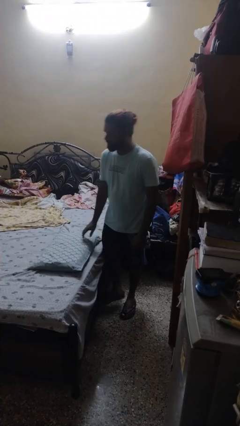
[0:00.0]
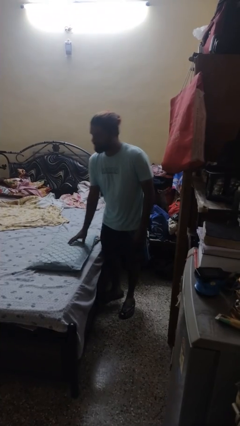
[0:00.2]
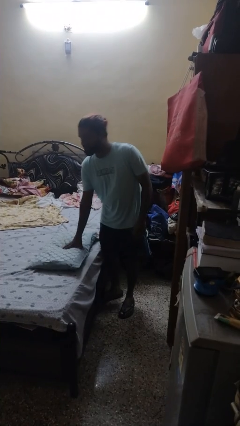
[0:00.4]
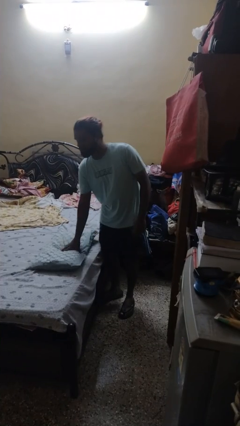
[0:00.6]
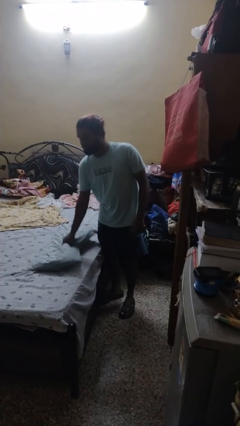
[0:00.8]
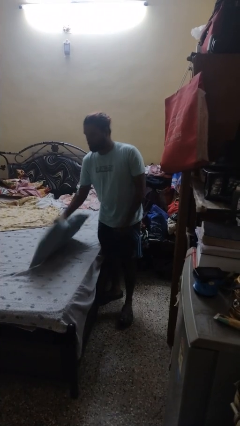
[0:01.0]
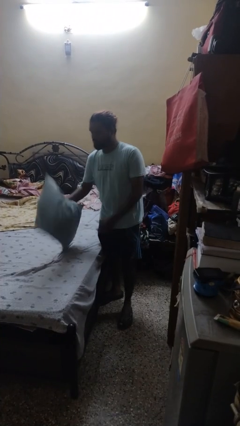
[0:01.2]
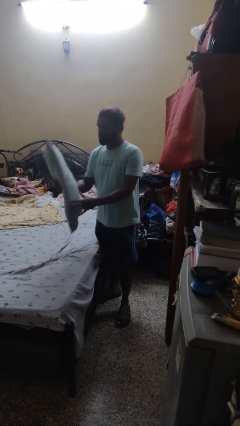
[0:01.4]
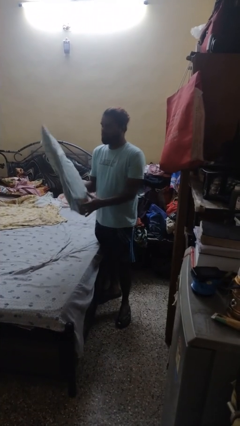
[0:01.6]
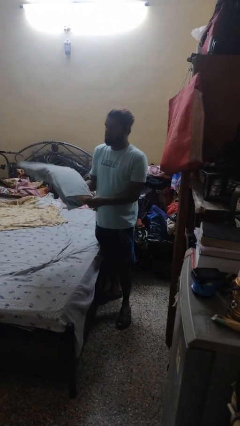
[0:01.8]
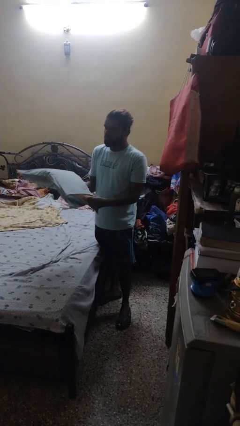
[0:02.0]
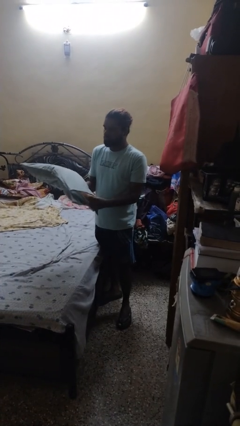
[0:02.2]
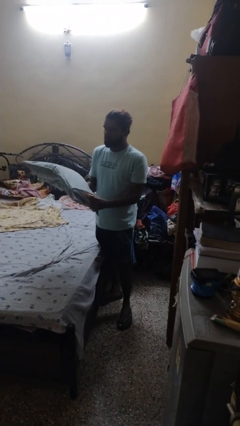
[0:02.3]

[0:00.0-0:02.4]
person picks up object from bed

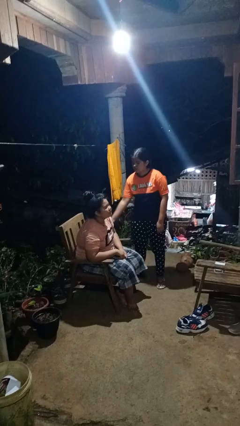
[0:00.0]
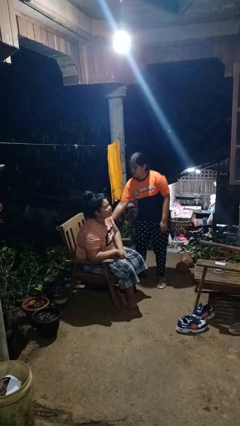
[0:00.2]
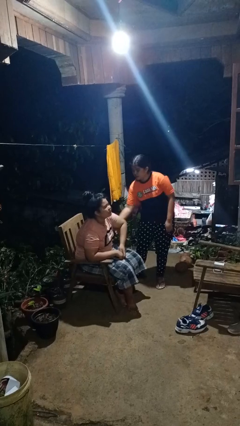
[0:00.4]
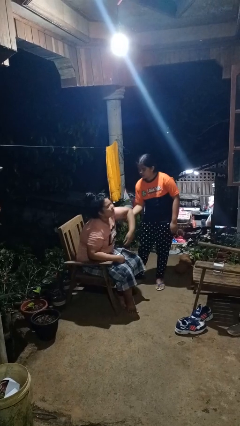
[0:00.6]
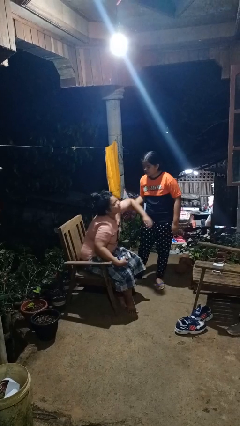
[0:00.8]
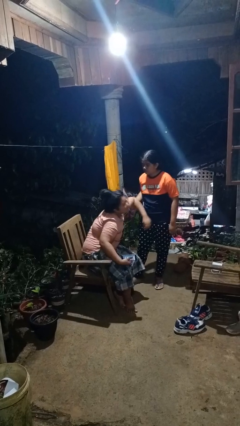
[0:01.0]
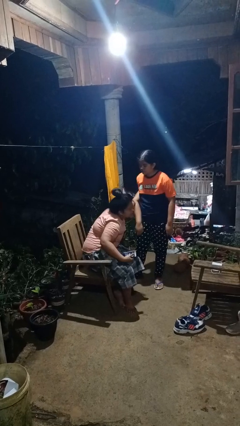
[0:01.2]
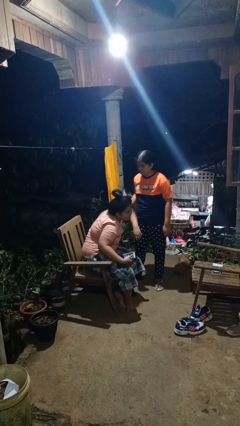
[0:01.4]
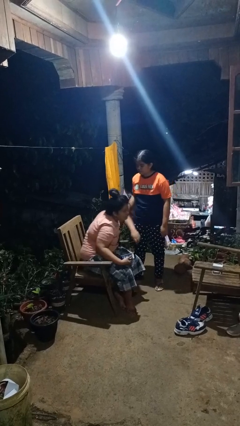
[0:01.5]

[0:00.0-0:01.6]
person grabs person by bicep

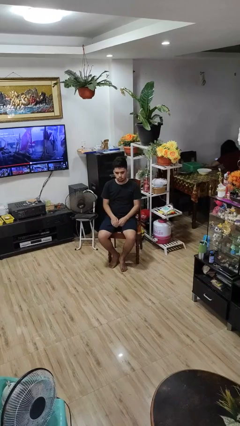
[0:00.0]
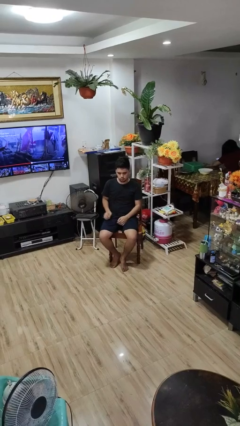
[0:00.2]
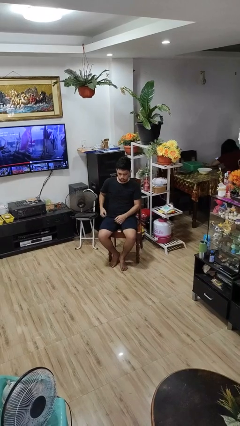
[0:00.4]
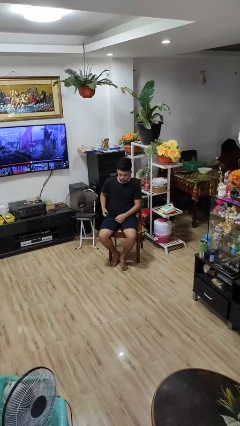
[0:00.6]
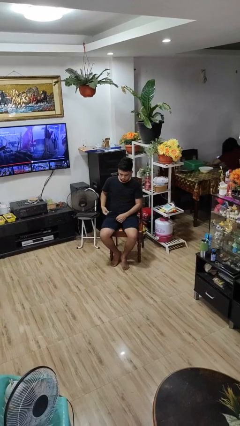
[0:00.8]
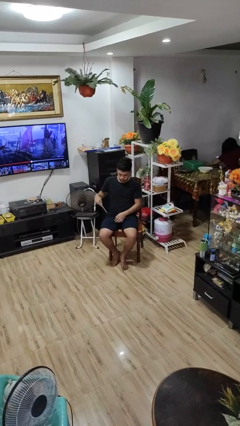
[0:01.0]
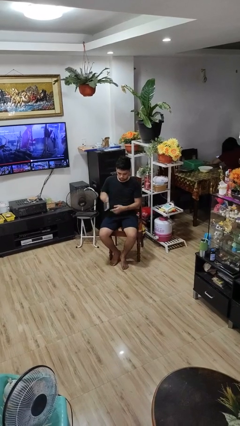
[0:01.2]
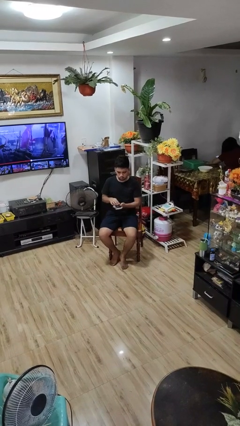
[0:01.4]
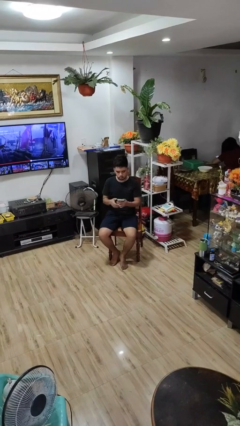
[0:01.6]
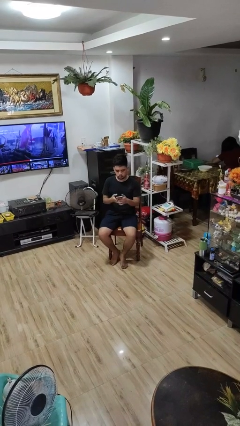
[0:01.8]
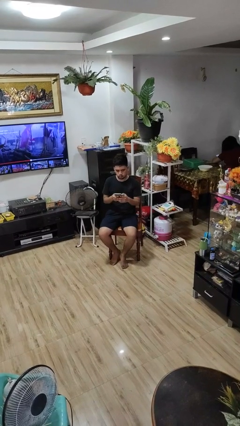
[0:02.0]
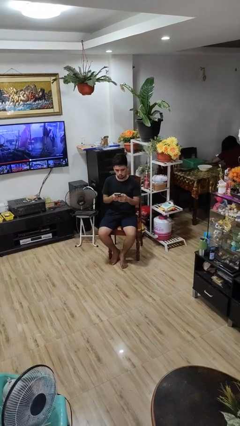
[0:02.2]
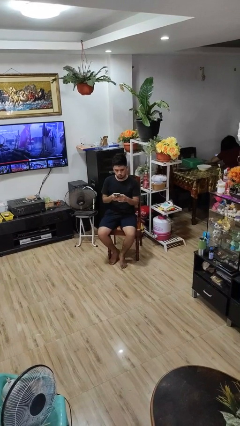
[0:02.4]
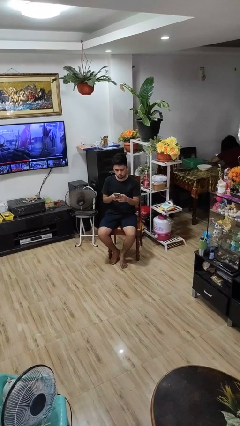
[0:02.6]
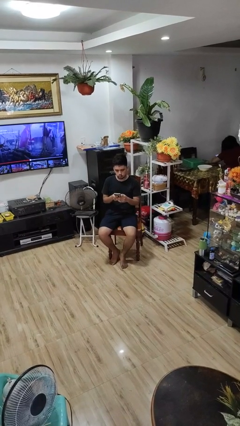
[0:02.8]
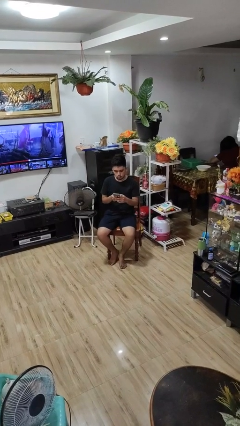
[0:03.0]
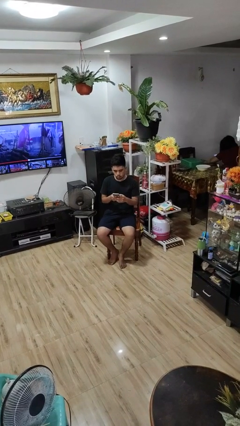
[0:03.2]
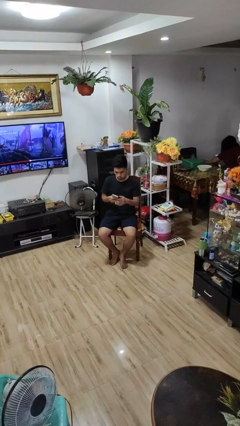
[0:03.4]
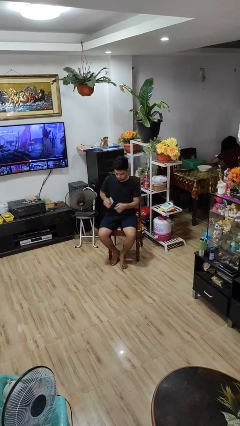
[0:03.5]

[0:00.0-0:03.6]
person takes phone from pocket

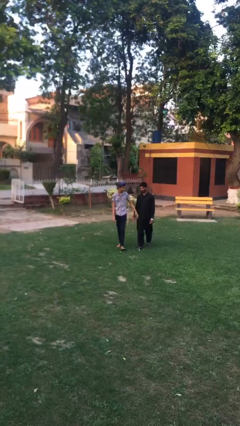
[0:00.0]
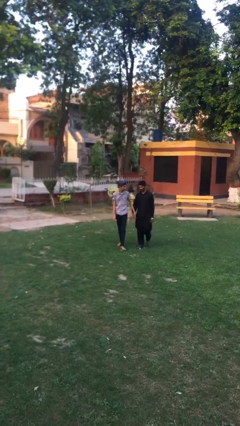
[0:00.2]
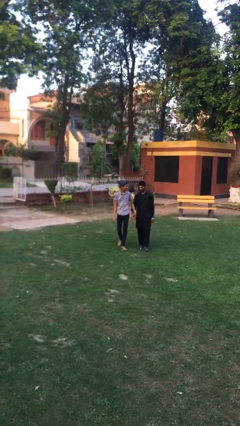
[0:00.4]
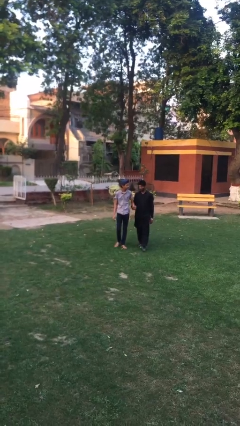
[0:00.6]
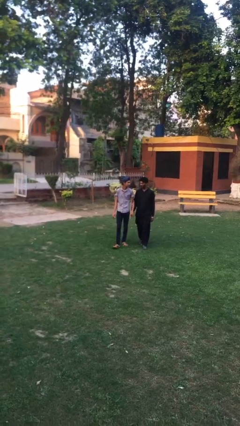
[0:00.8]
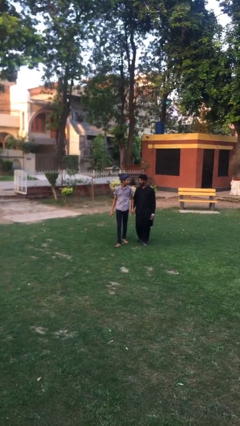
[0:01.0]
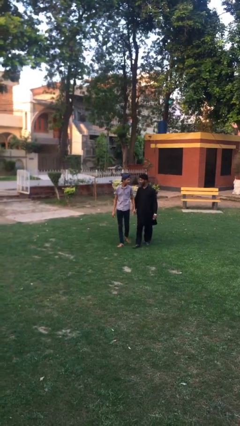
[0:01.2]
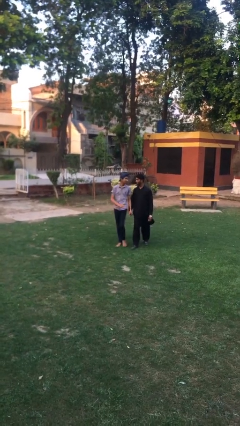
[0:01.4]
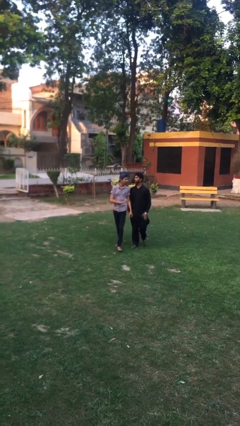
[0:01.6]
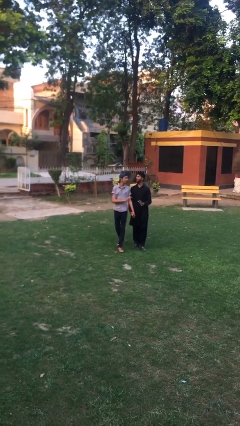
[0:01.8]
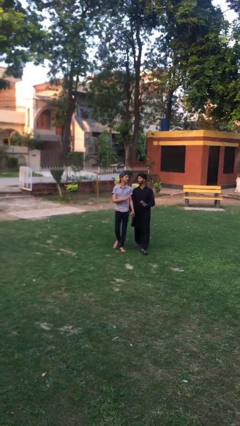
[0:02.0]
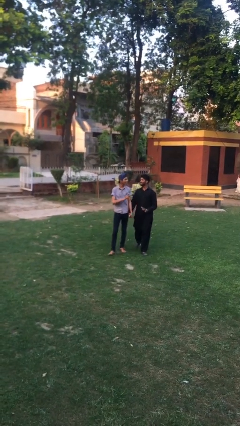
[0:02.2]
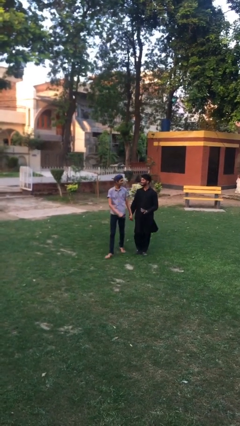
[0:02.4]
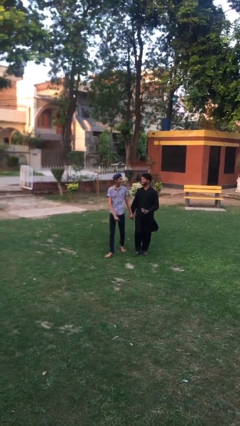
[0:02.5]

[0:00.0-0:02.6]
person holds hand

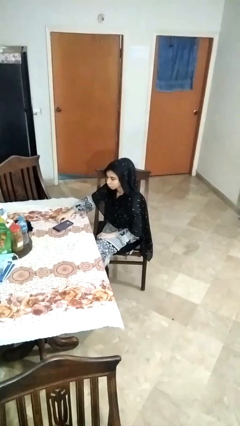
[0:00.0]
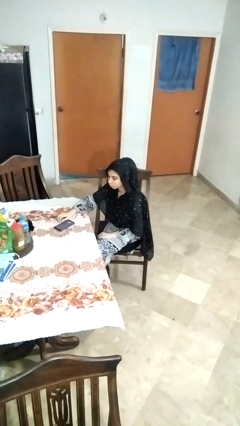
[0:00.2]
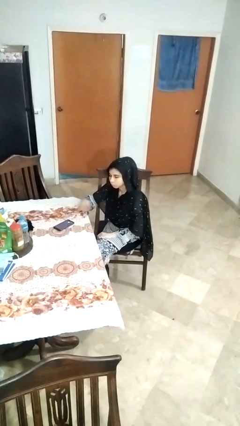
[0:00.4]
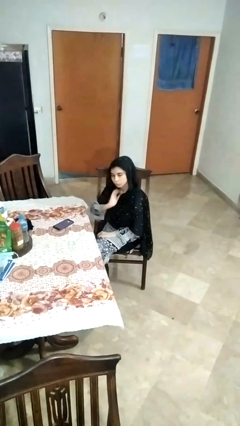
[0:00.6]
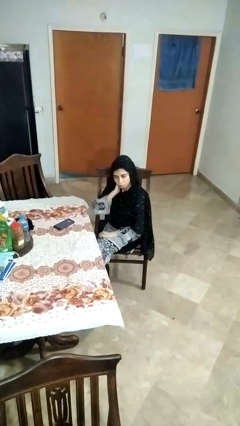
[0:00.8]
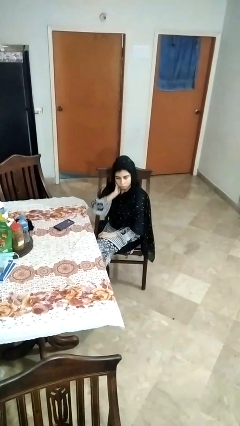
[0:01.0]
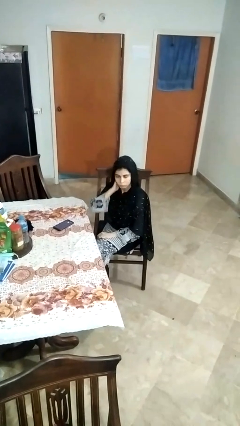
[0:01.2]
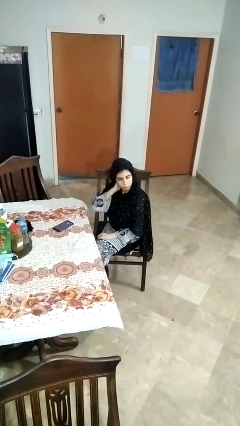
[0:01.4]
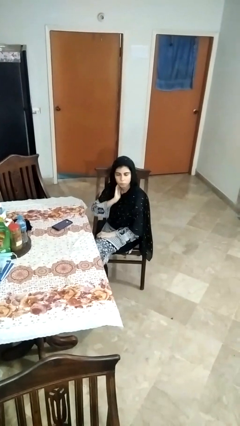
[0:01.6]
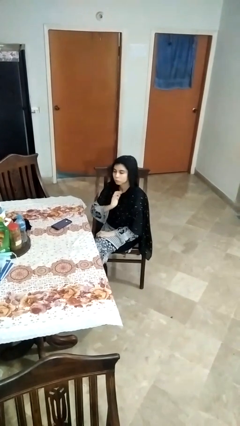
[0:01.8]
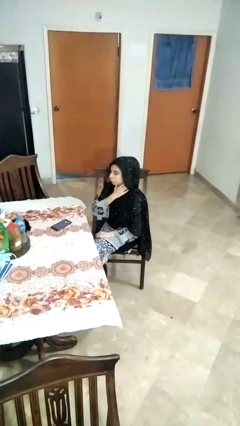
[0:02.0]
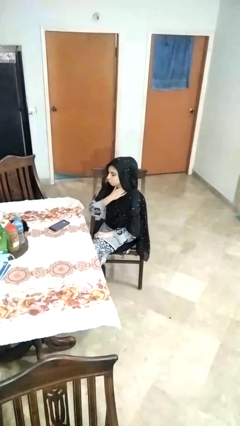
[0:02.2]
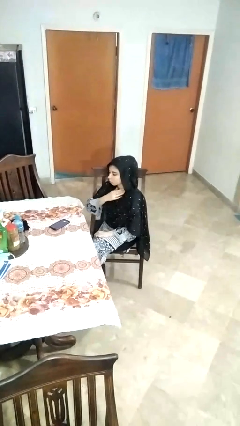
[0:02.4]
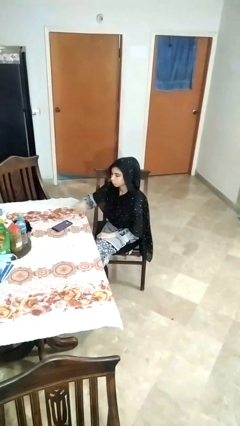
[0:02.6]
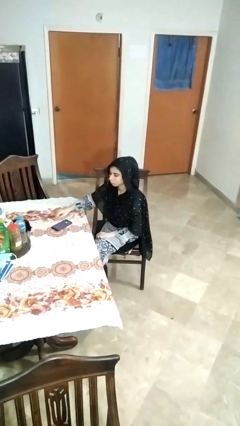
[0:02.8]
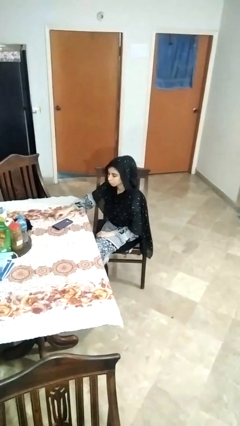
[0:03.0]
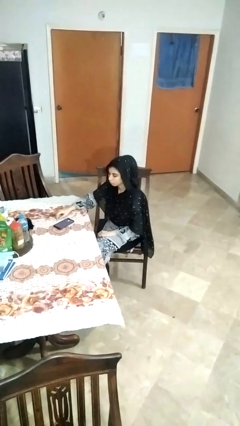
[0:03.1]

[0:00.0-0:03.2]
person rubs neck

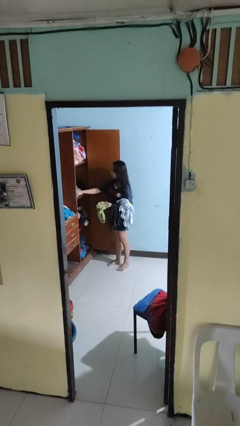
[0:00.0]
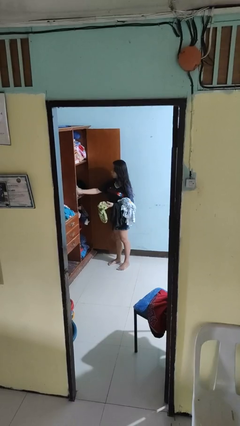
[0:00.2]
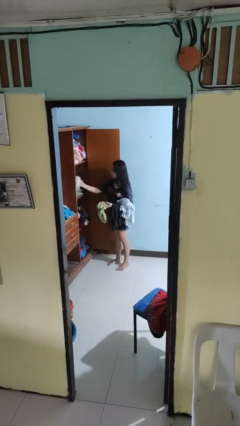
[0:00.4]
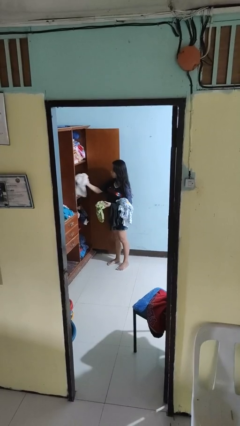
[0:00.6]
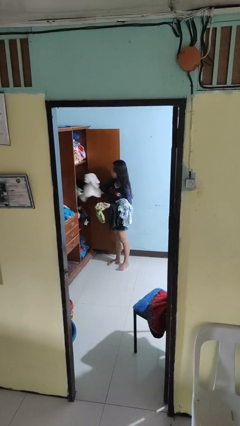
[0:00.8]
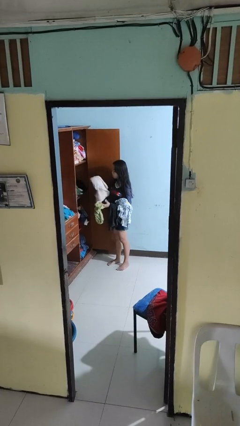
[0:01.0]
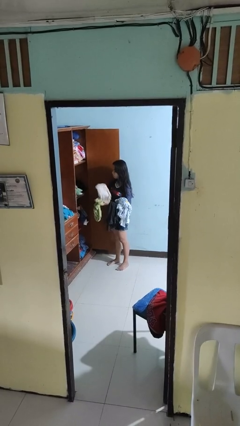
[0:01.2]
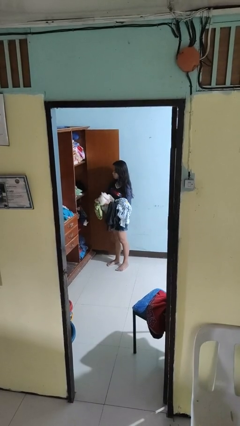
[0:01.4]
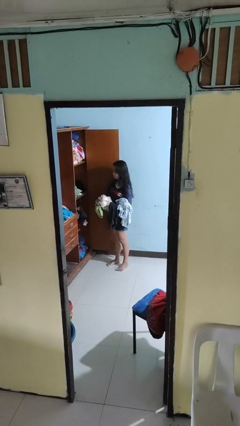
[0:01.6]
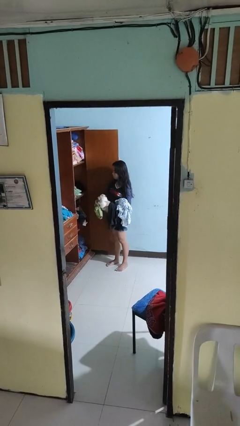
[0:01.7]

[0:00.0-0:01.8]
person takes clothes from dresser

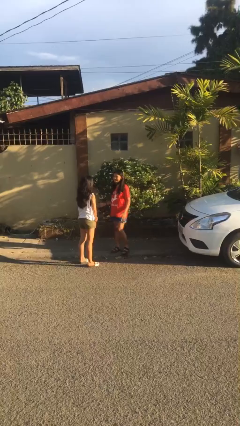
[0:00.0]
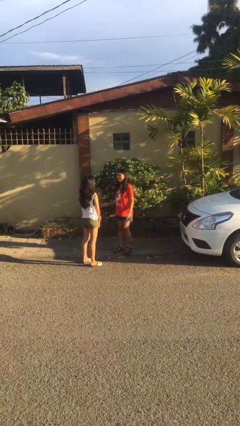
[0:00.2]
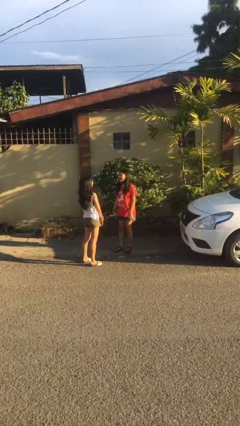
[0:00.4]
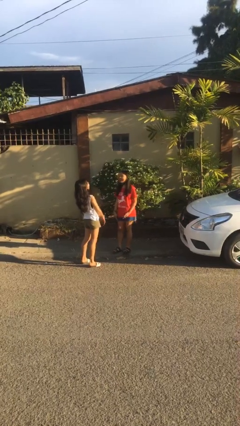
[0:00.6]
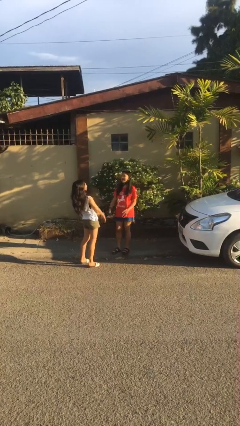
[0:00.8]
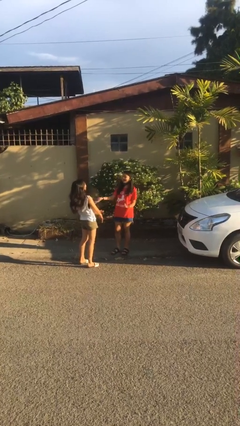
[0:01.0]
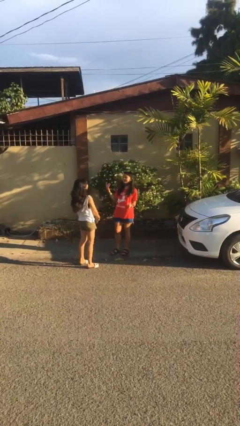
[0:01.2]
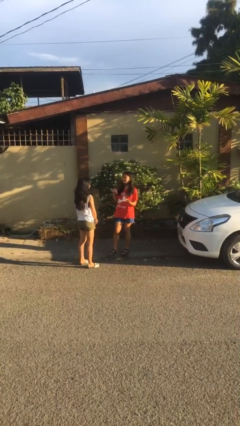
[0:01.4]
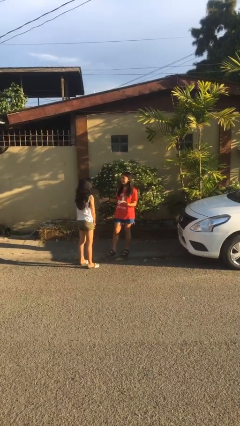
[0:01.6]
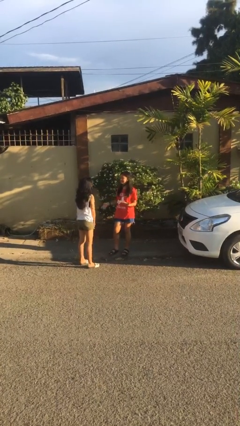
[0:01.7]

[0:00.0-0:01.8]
person laughs with person
